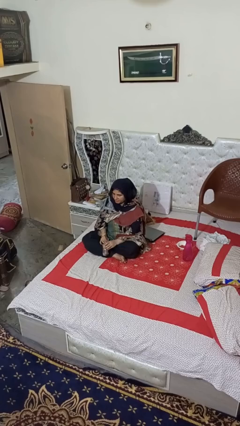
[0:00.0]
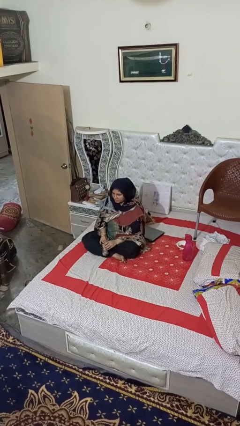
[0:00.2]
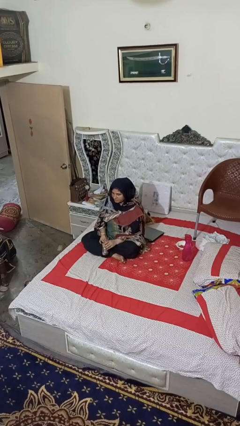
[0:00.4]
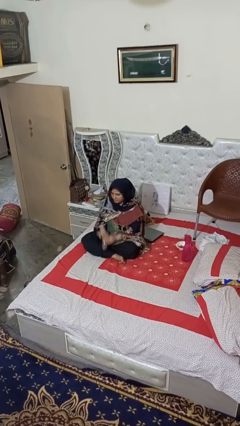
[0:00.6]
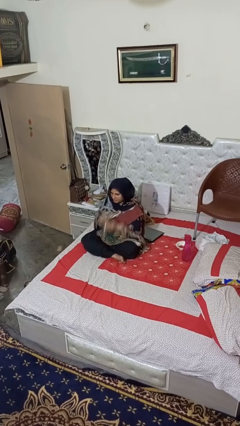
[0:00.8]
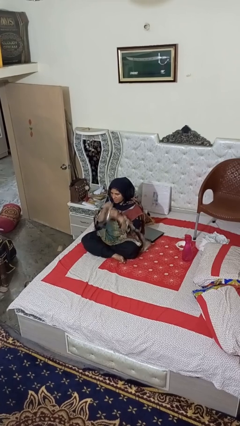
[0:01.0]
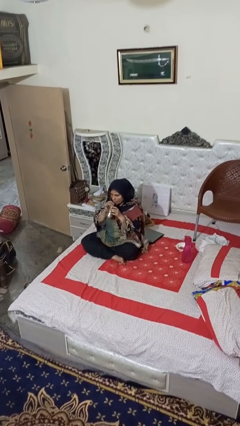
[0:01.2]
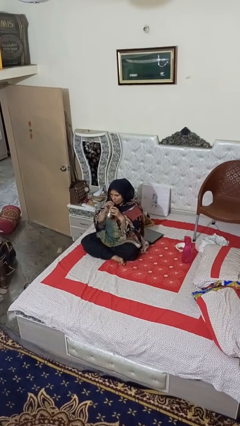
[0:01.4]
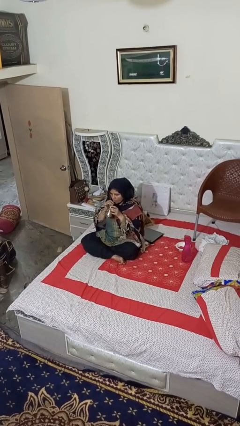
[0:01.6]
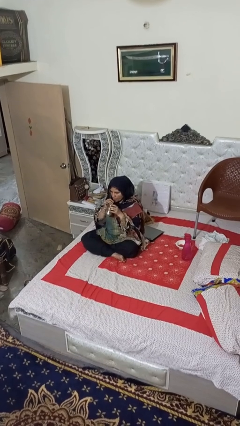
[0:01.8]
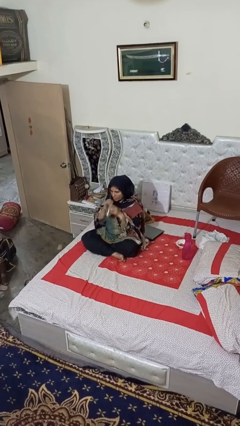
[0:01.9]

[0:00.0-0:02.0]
person drinks from straw

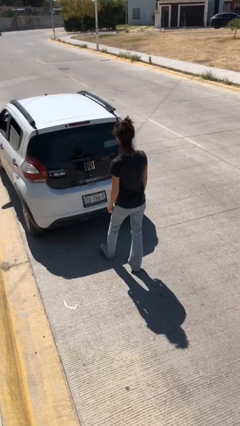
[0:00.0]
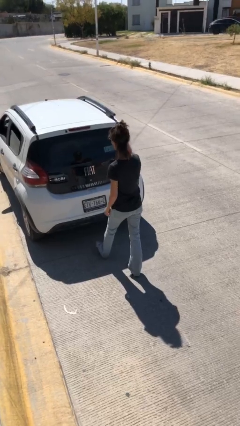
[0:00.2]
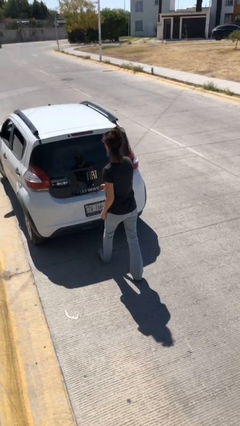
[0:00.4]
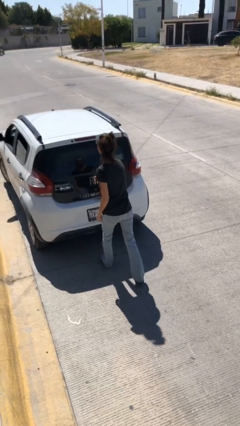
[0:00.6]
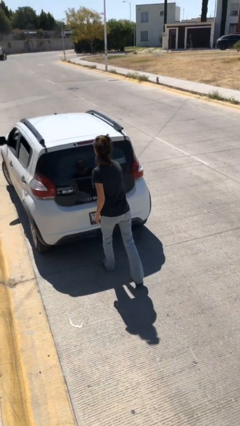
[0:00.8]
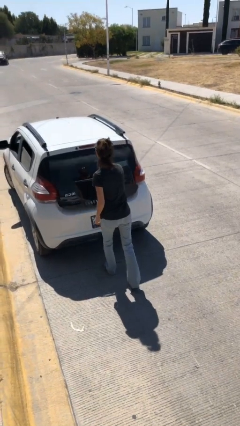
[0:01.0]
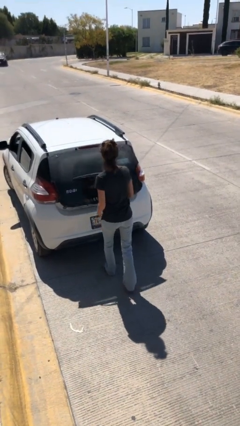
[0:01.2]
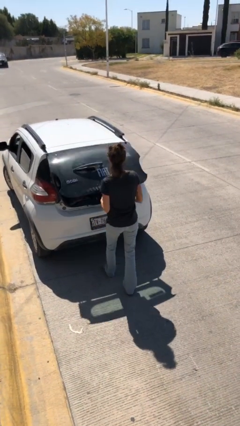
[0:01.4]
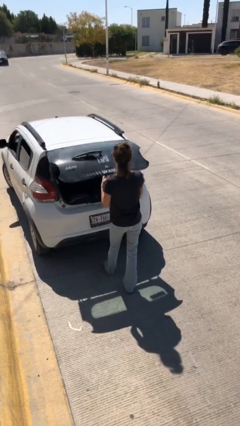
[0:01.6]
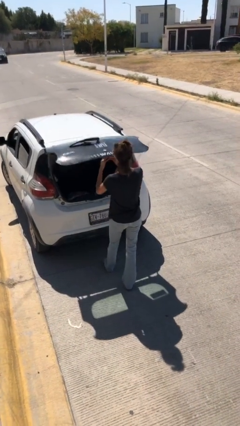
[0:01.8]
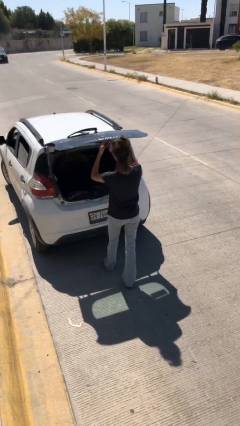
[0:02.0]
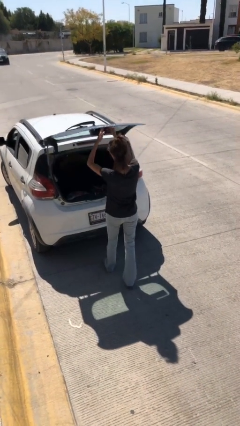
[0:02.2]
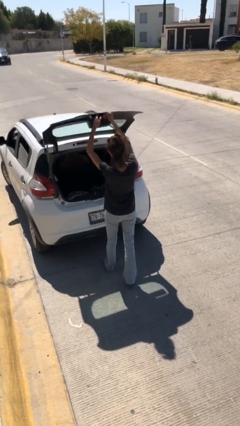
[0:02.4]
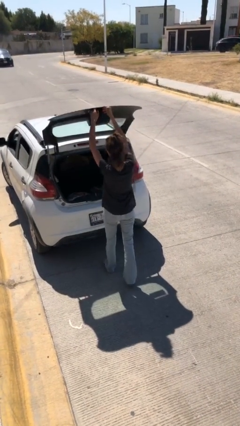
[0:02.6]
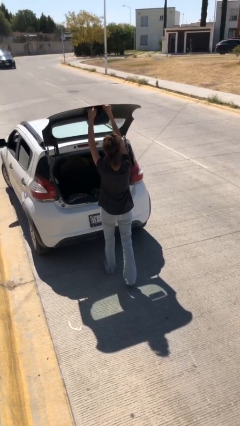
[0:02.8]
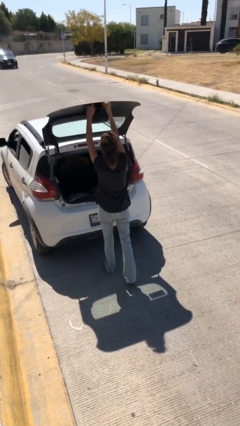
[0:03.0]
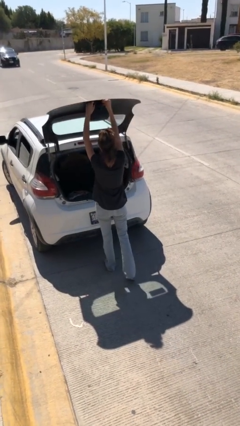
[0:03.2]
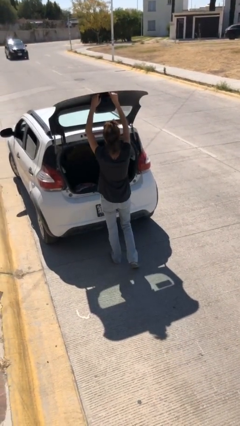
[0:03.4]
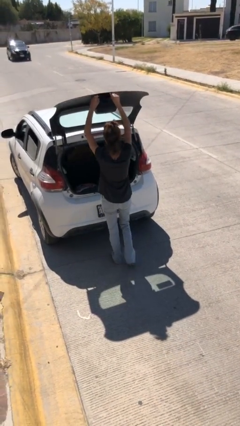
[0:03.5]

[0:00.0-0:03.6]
person opens car trunk

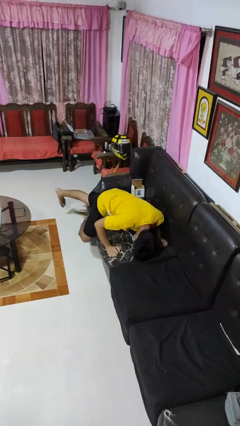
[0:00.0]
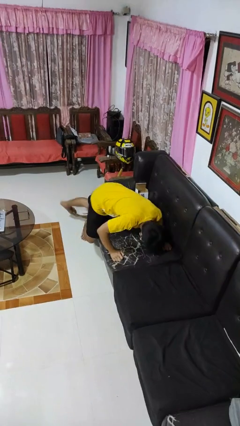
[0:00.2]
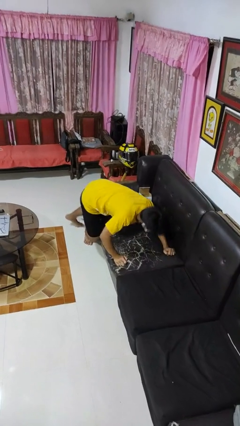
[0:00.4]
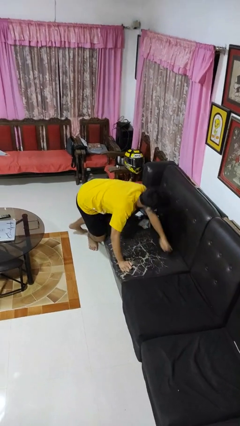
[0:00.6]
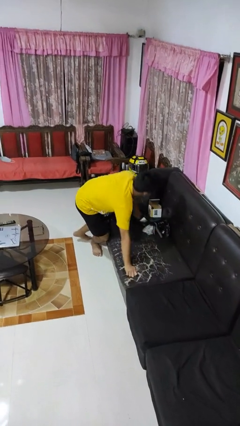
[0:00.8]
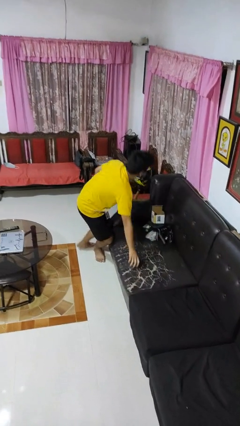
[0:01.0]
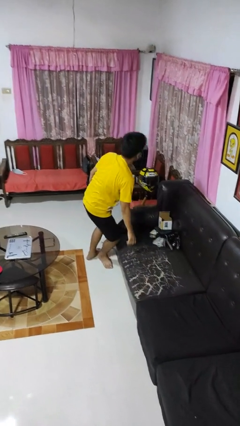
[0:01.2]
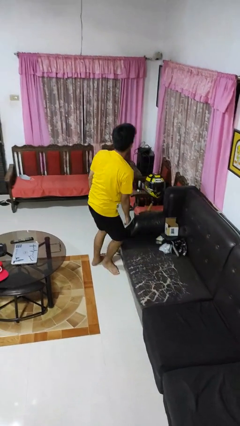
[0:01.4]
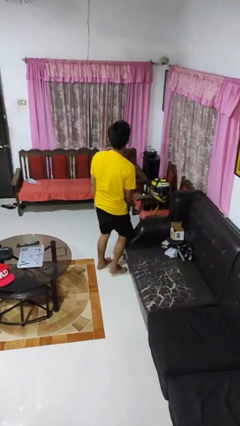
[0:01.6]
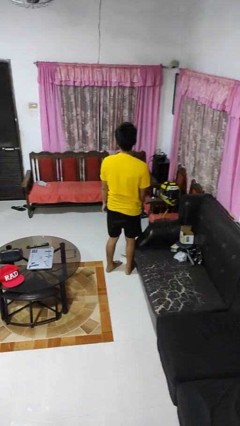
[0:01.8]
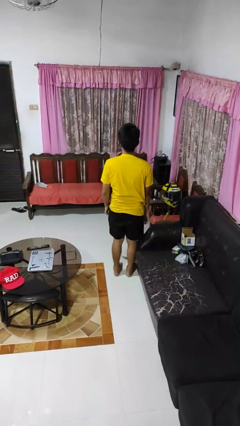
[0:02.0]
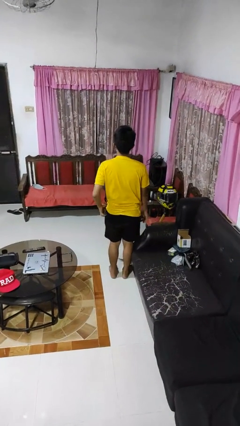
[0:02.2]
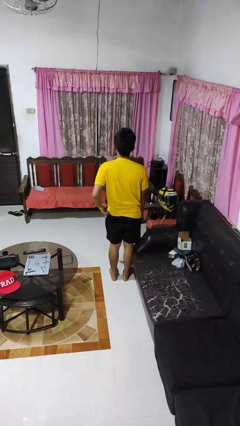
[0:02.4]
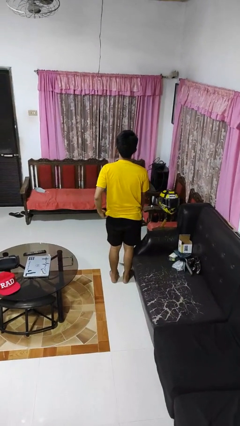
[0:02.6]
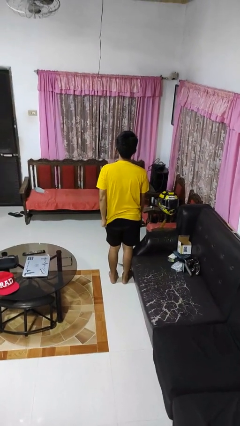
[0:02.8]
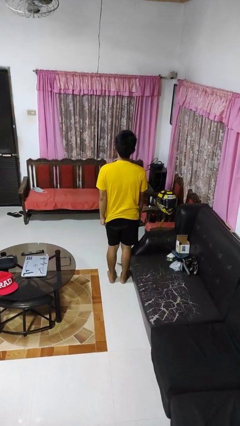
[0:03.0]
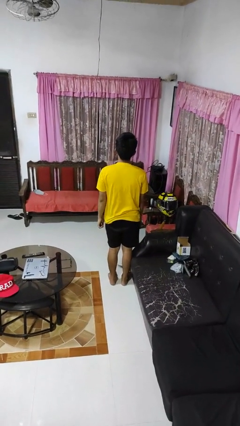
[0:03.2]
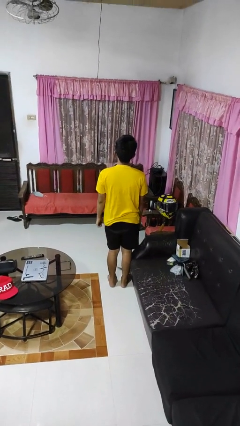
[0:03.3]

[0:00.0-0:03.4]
person stands up

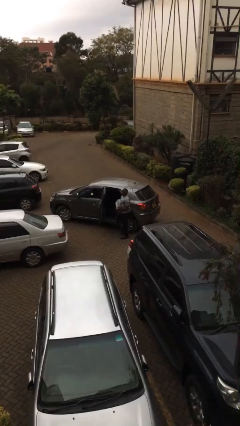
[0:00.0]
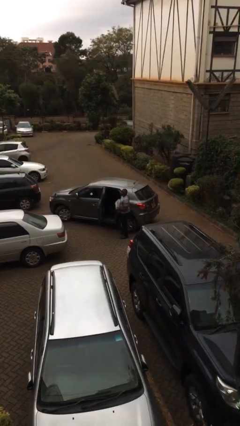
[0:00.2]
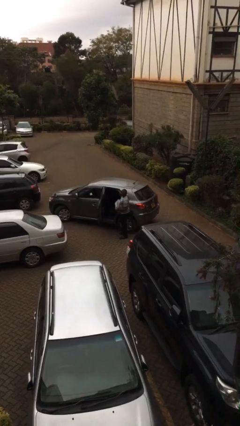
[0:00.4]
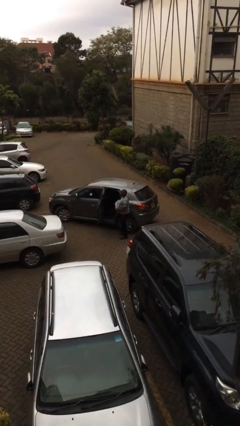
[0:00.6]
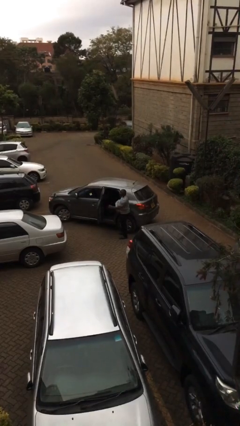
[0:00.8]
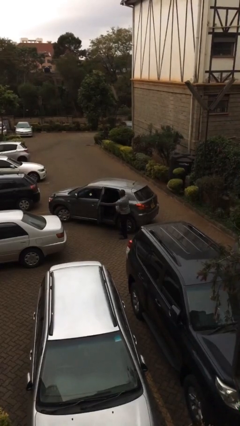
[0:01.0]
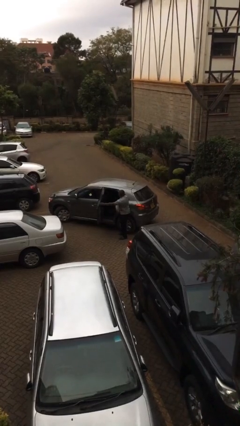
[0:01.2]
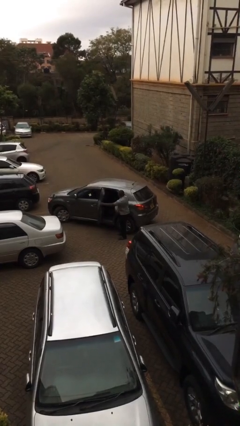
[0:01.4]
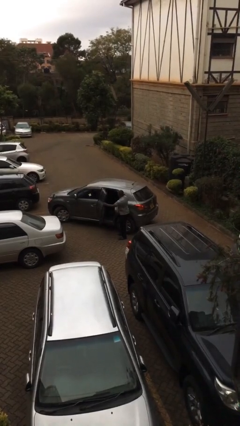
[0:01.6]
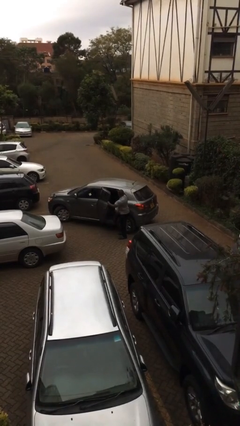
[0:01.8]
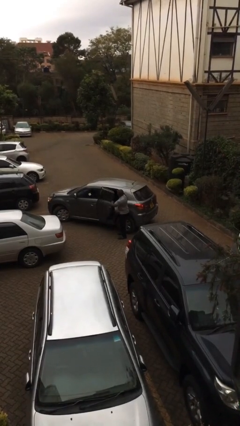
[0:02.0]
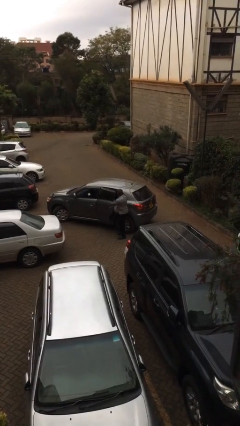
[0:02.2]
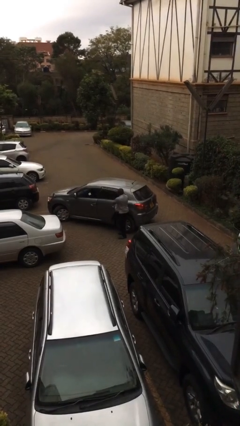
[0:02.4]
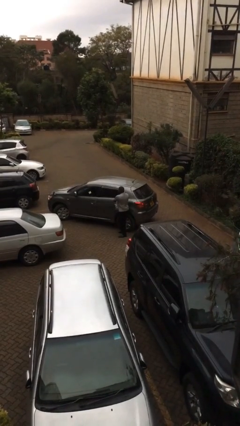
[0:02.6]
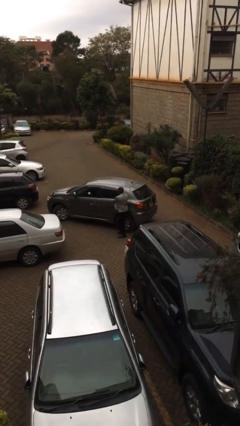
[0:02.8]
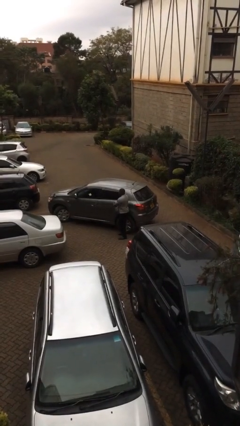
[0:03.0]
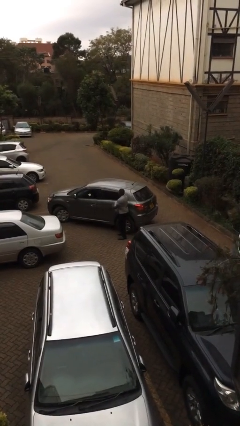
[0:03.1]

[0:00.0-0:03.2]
person closes car door

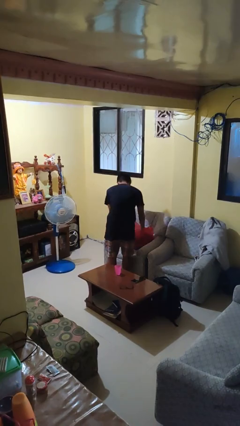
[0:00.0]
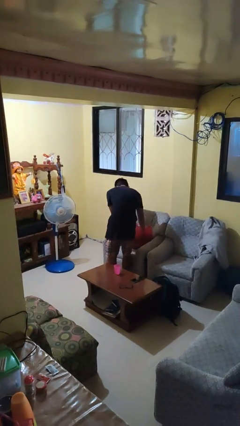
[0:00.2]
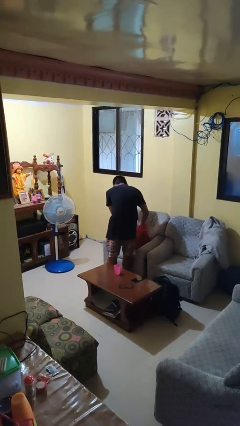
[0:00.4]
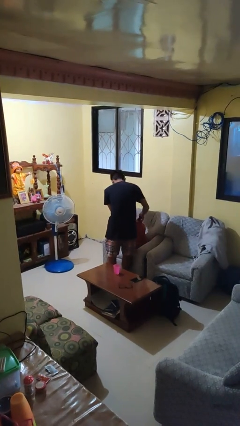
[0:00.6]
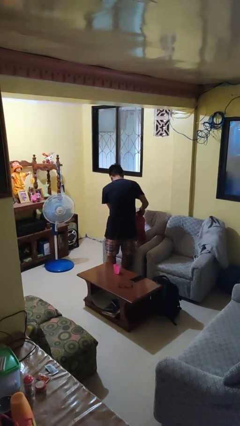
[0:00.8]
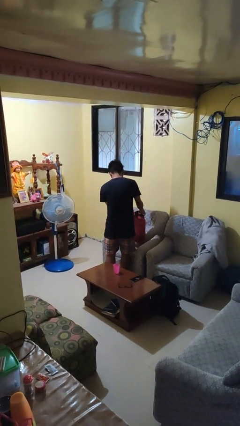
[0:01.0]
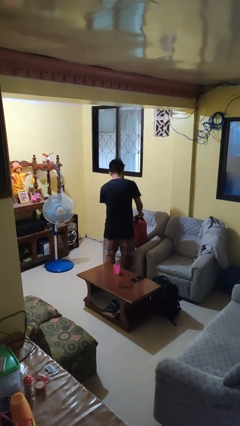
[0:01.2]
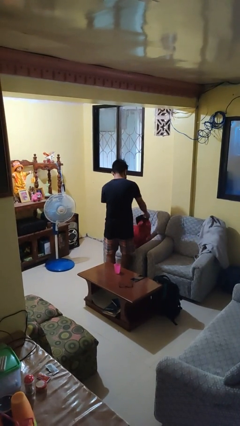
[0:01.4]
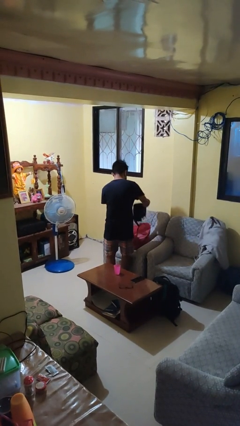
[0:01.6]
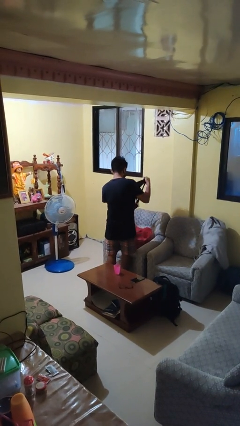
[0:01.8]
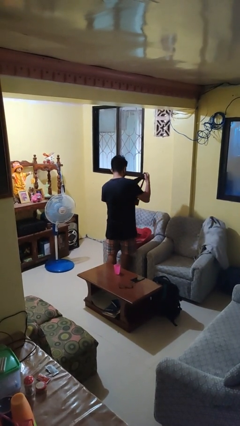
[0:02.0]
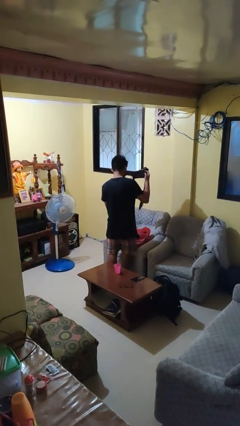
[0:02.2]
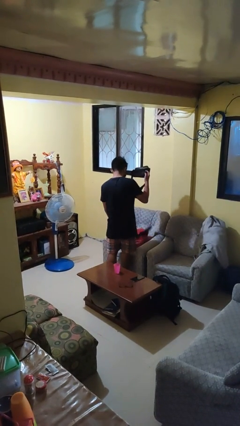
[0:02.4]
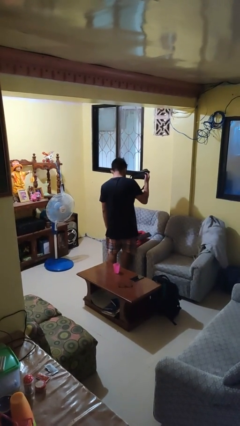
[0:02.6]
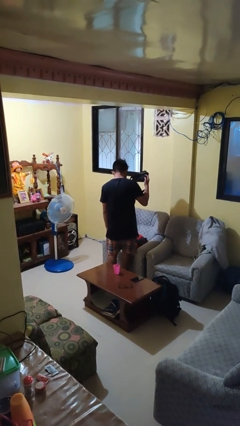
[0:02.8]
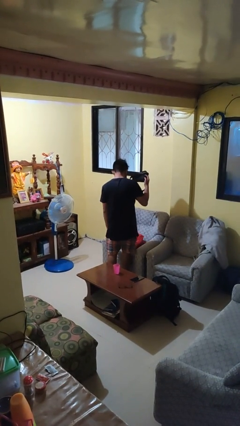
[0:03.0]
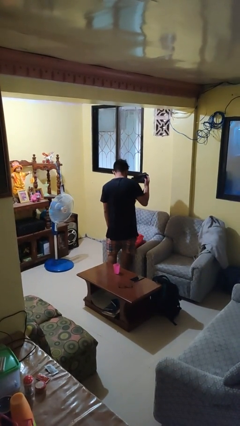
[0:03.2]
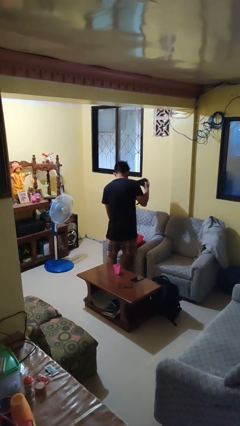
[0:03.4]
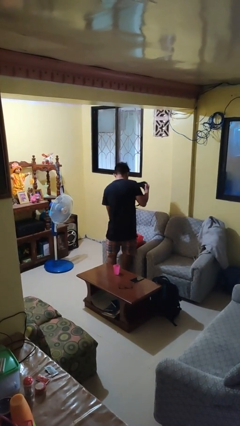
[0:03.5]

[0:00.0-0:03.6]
person takes object from bag

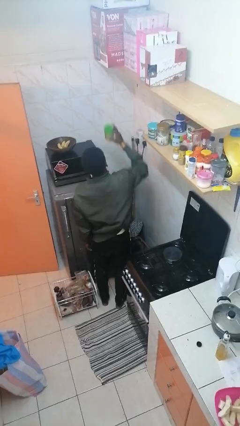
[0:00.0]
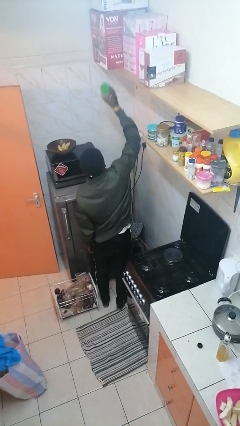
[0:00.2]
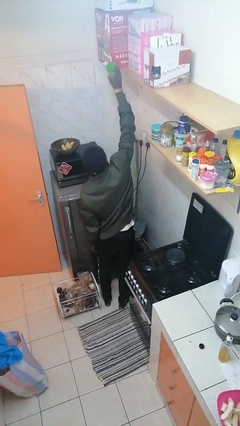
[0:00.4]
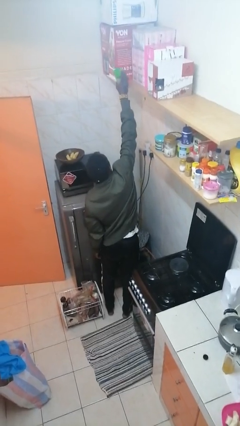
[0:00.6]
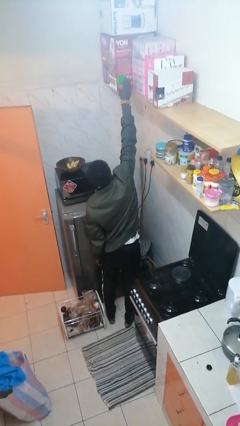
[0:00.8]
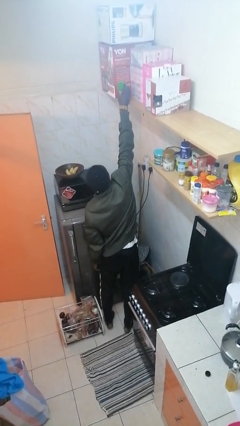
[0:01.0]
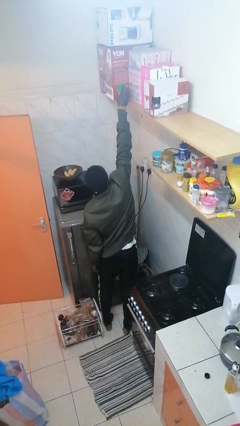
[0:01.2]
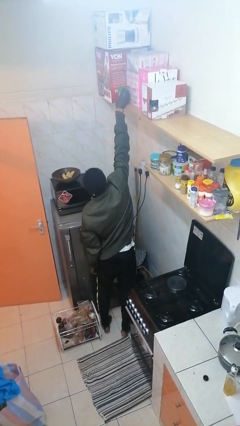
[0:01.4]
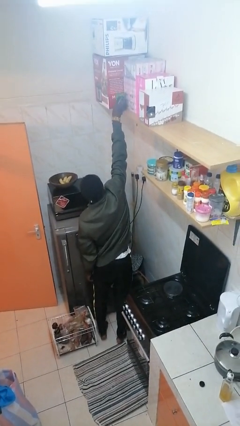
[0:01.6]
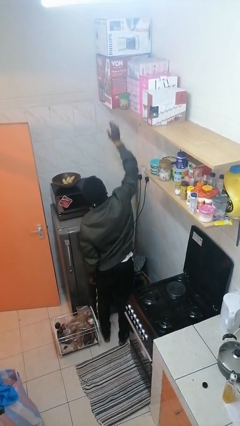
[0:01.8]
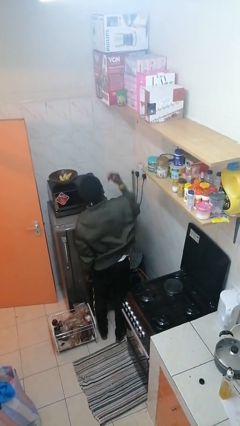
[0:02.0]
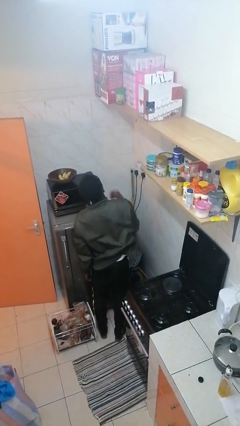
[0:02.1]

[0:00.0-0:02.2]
person puts down object on shelf
